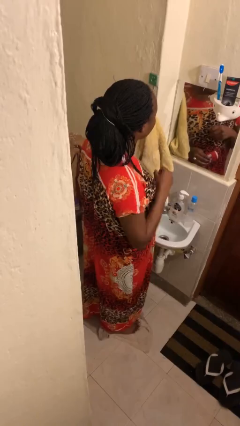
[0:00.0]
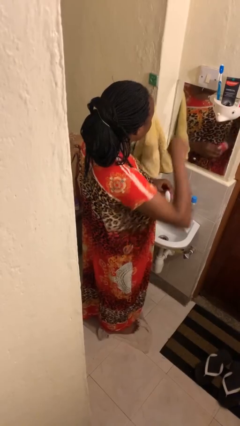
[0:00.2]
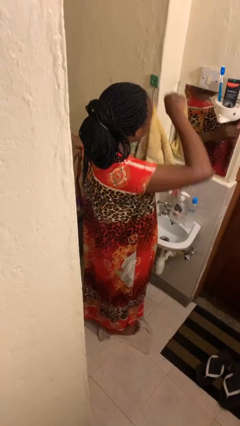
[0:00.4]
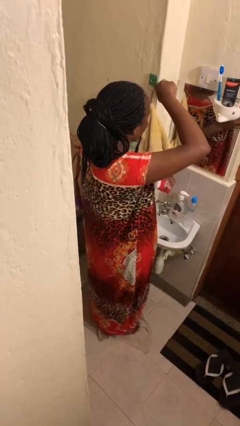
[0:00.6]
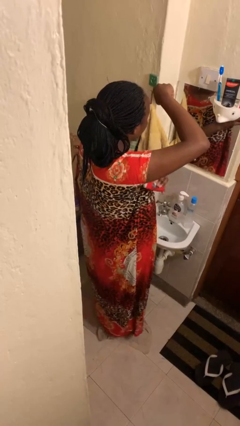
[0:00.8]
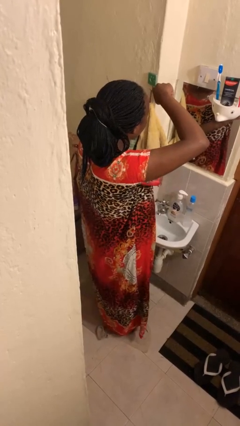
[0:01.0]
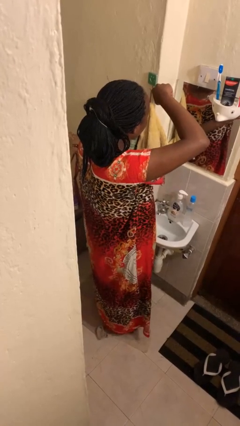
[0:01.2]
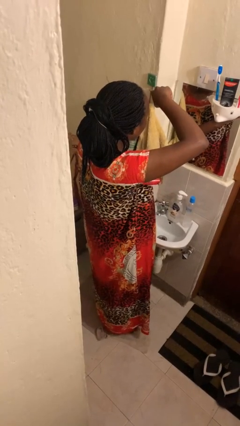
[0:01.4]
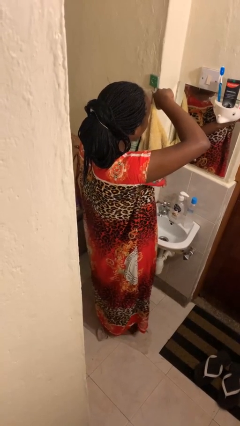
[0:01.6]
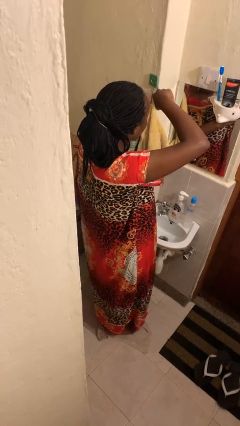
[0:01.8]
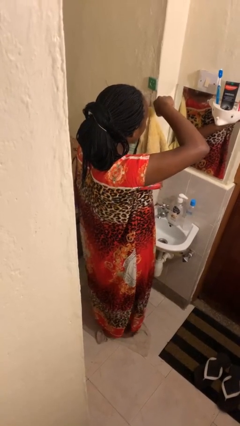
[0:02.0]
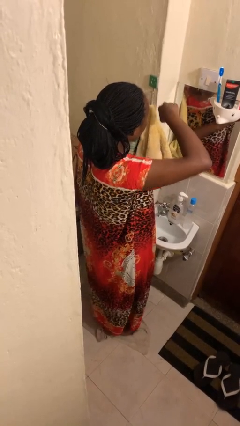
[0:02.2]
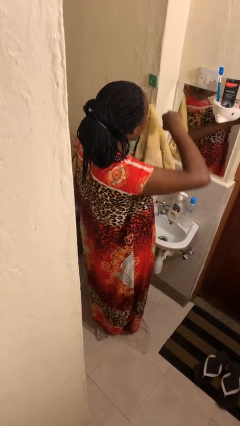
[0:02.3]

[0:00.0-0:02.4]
person applies deodorant

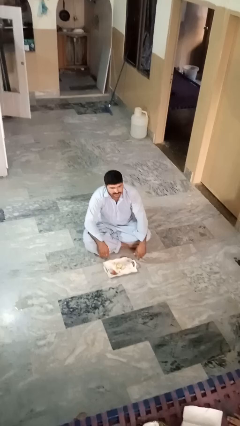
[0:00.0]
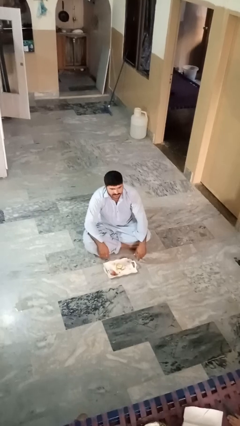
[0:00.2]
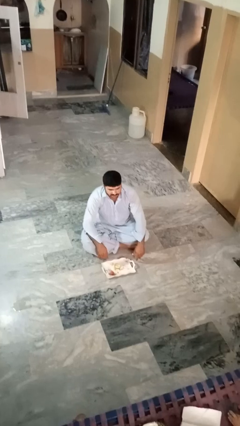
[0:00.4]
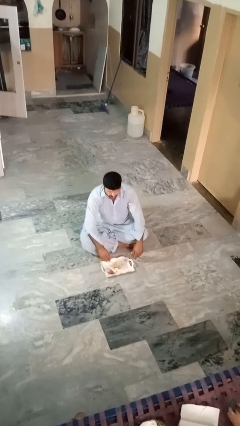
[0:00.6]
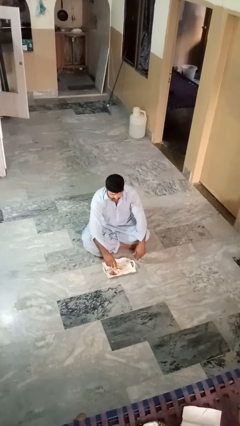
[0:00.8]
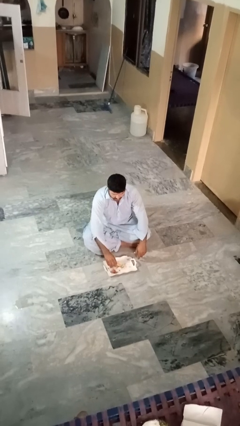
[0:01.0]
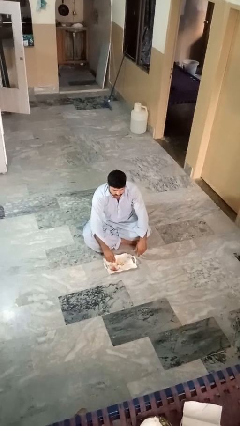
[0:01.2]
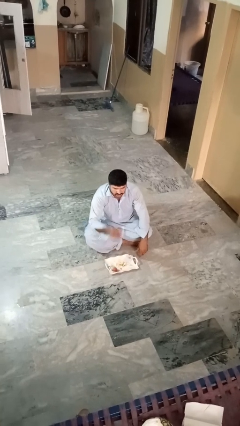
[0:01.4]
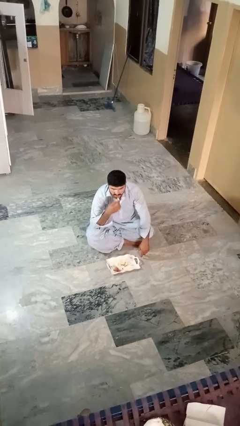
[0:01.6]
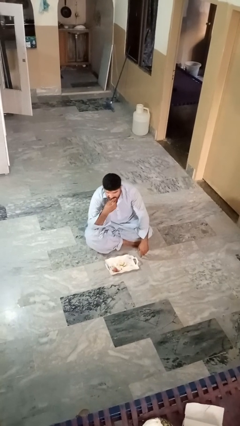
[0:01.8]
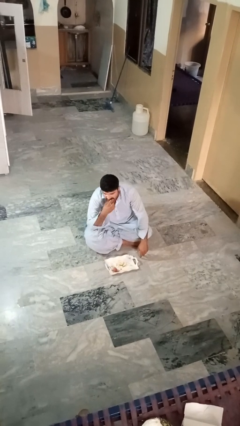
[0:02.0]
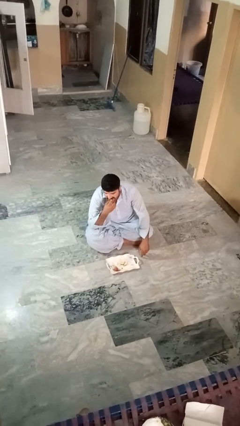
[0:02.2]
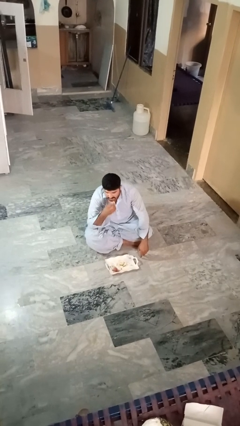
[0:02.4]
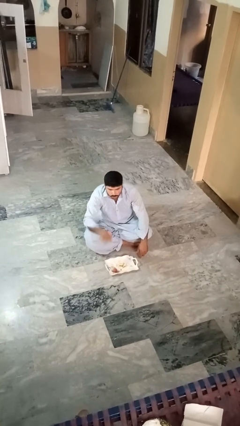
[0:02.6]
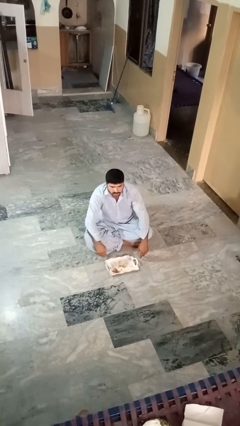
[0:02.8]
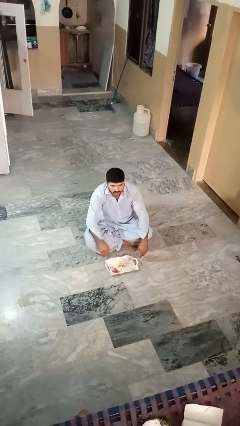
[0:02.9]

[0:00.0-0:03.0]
person eats apple

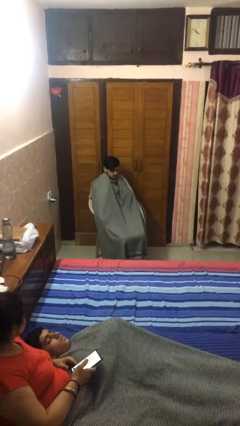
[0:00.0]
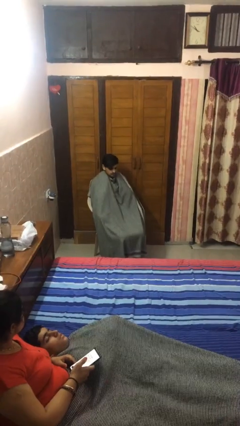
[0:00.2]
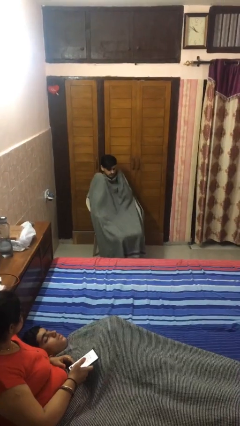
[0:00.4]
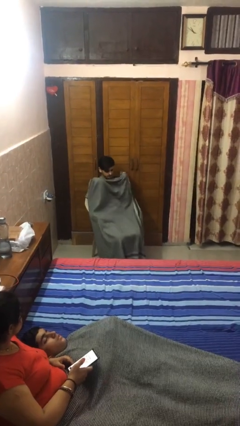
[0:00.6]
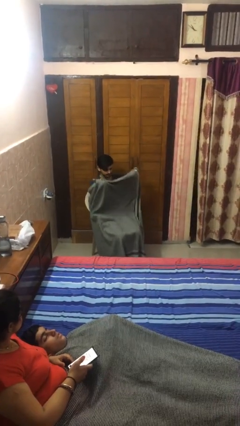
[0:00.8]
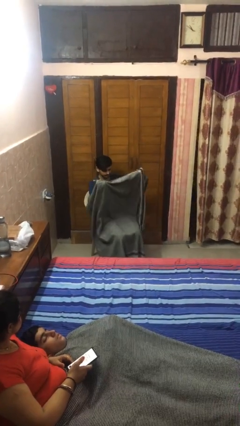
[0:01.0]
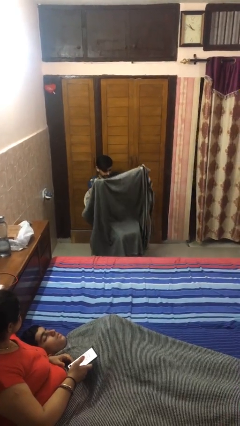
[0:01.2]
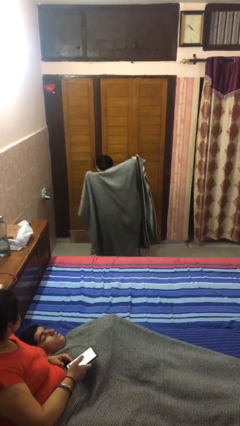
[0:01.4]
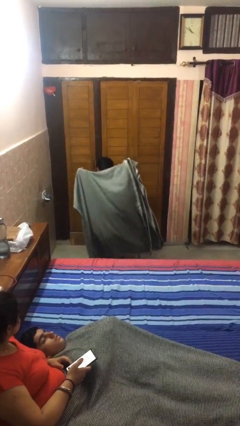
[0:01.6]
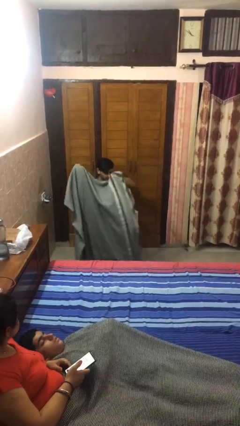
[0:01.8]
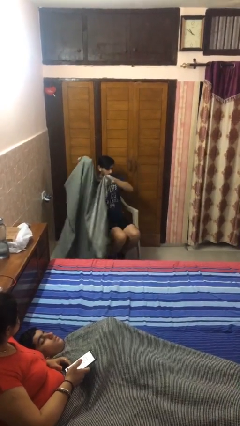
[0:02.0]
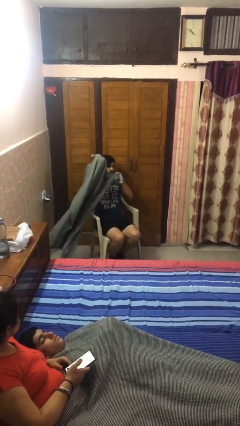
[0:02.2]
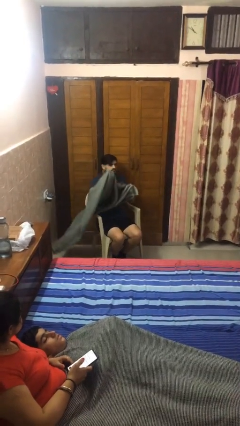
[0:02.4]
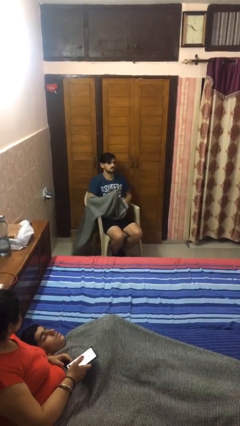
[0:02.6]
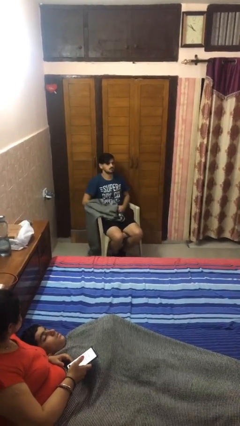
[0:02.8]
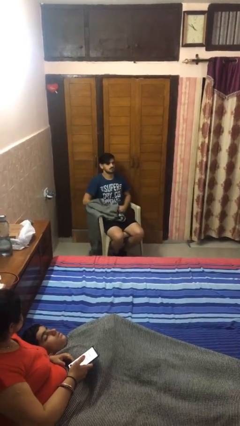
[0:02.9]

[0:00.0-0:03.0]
person uncovers with blanket

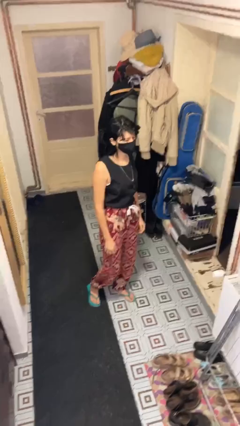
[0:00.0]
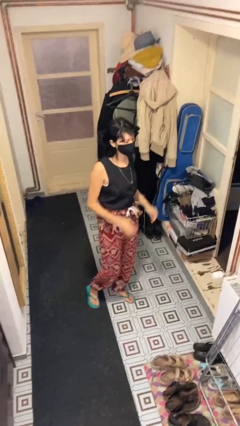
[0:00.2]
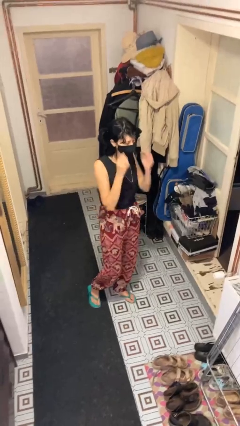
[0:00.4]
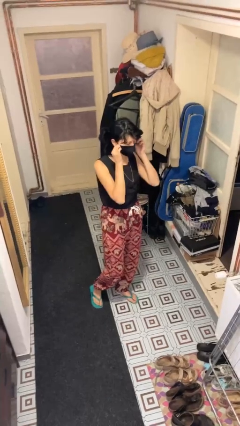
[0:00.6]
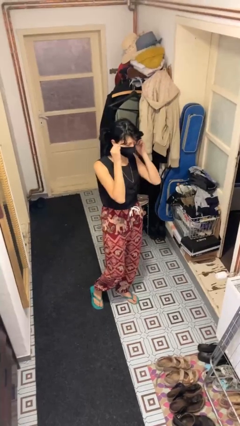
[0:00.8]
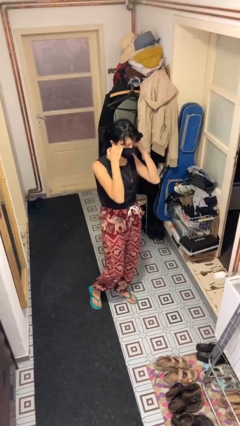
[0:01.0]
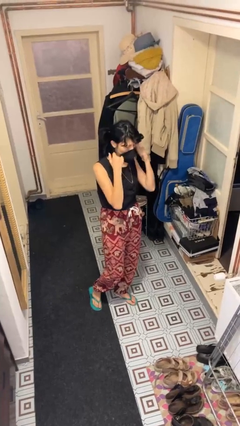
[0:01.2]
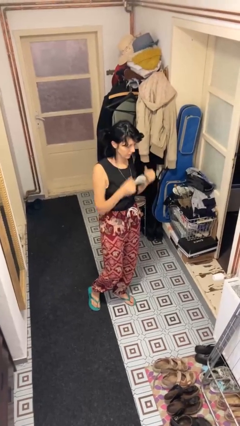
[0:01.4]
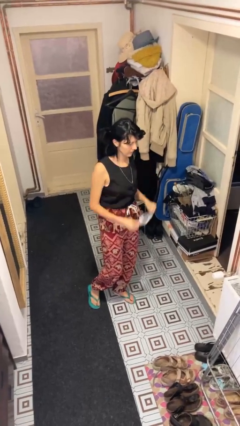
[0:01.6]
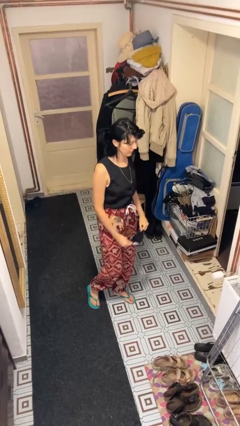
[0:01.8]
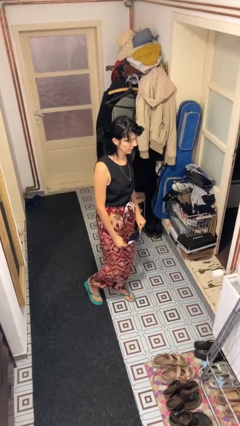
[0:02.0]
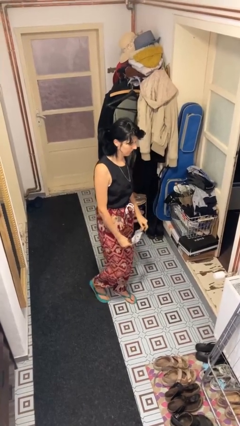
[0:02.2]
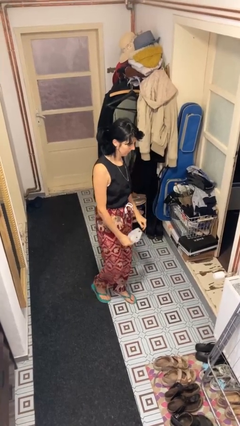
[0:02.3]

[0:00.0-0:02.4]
person takes off facemask

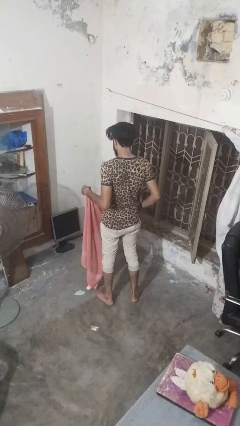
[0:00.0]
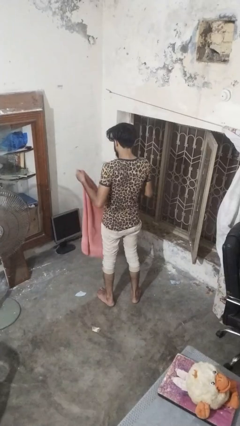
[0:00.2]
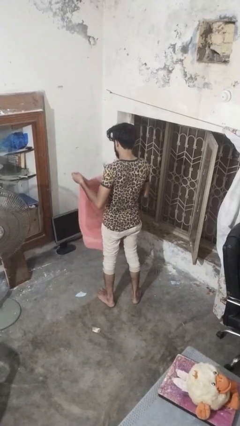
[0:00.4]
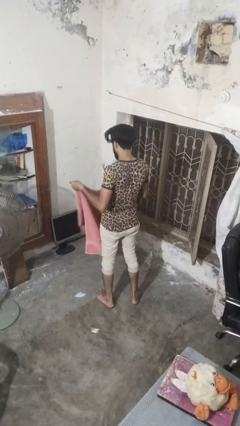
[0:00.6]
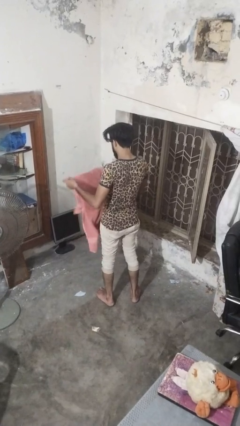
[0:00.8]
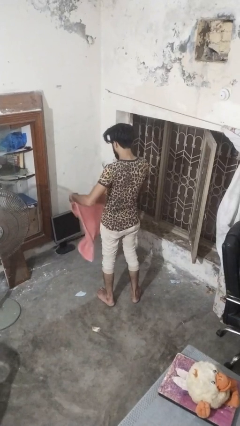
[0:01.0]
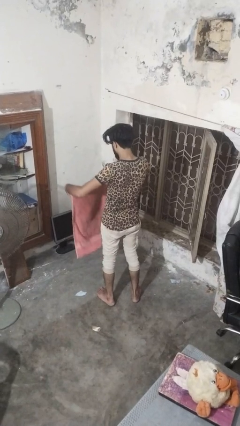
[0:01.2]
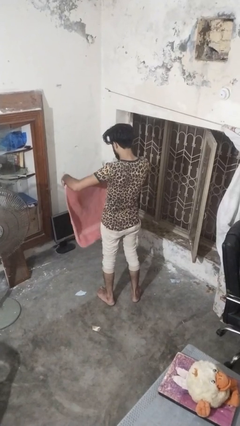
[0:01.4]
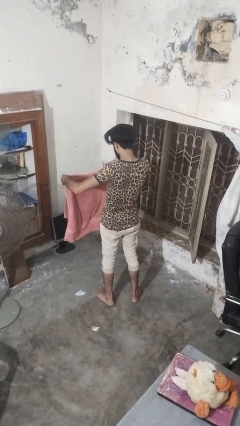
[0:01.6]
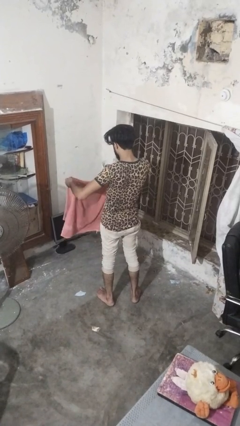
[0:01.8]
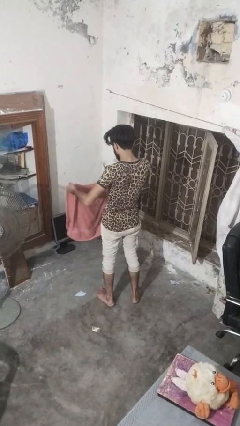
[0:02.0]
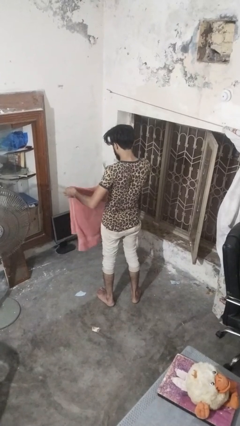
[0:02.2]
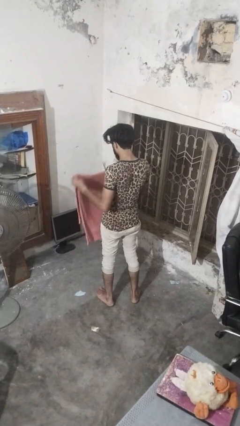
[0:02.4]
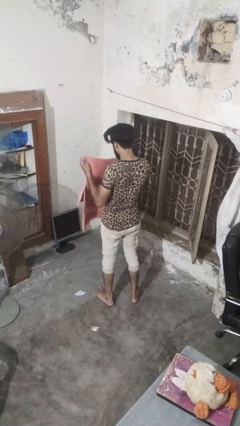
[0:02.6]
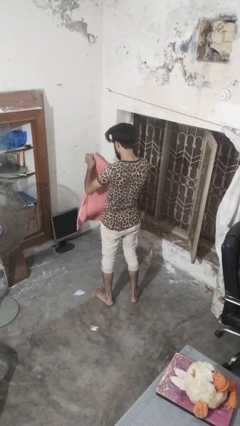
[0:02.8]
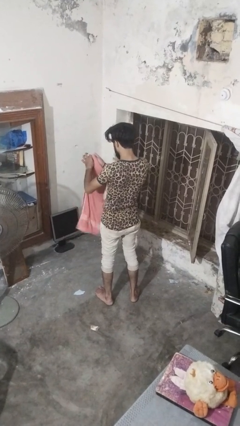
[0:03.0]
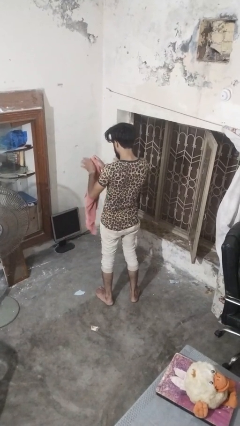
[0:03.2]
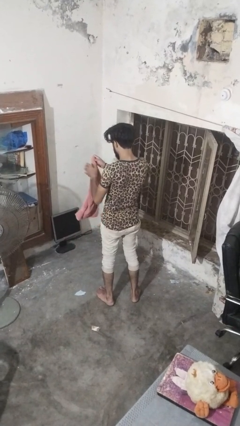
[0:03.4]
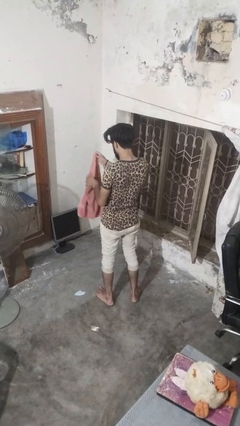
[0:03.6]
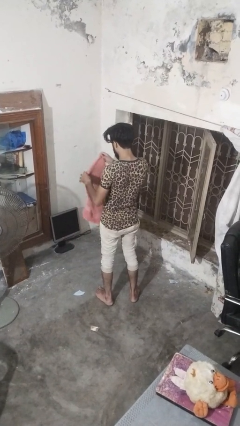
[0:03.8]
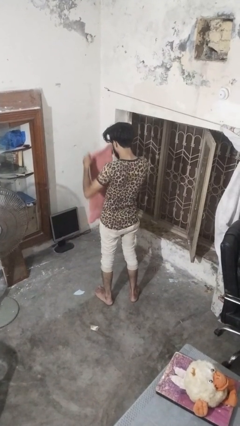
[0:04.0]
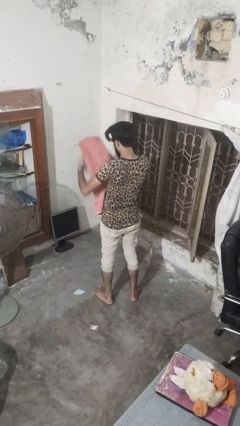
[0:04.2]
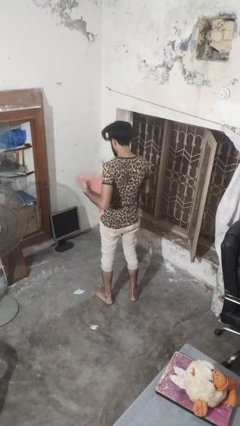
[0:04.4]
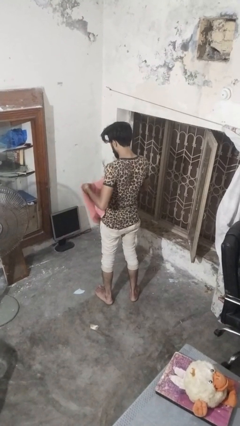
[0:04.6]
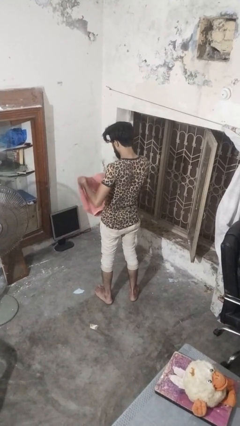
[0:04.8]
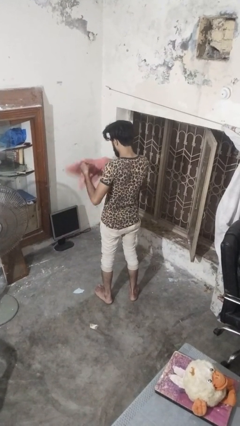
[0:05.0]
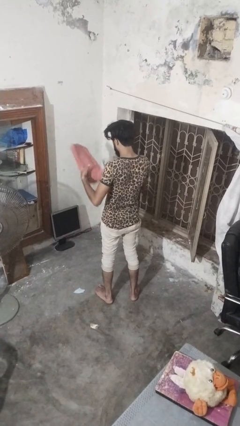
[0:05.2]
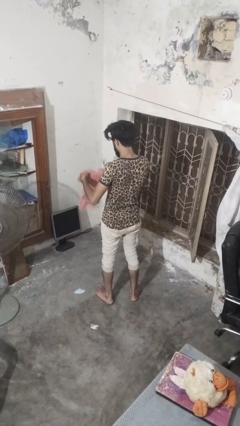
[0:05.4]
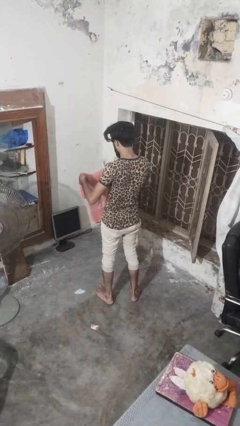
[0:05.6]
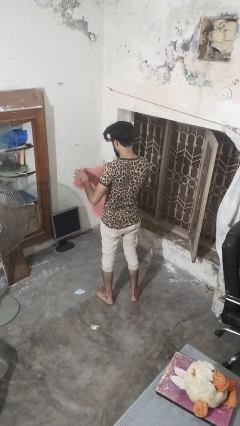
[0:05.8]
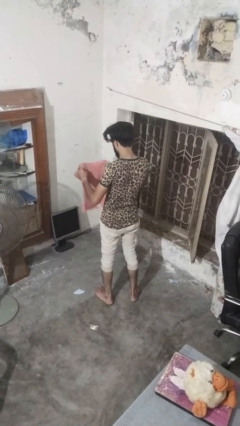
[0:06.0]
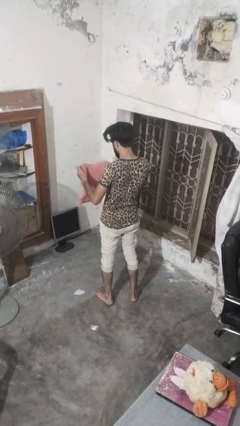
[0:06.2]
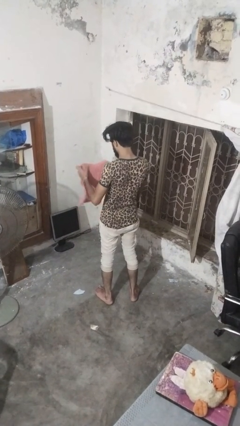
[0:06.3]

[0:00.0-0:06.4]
person folds towel

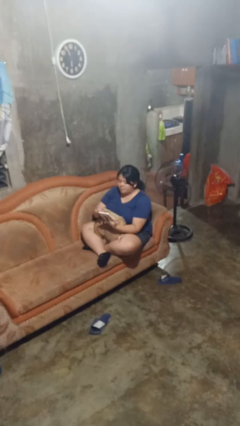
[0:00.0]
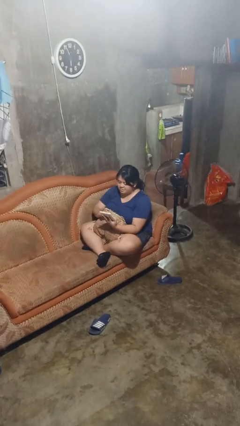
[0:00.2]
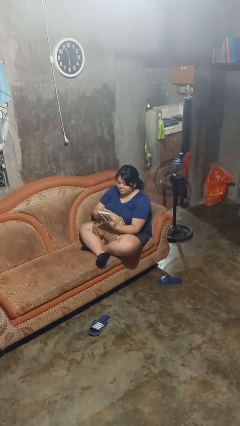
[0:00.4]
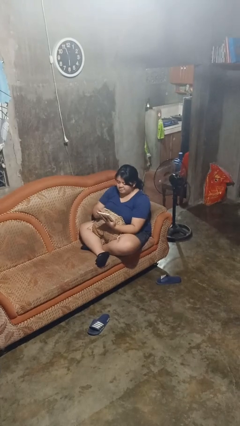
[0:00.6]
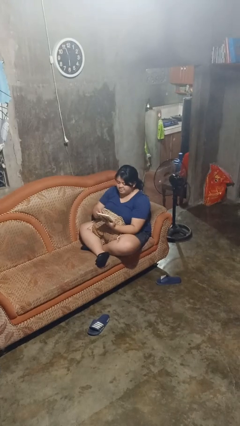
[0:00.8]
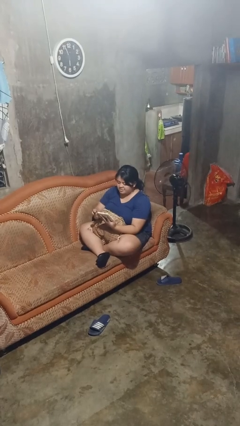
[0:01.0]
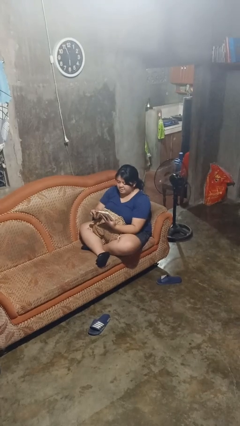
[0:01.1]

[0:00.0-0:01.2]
person interacts with tablet
